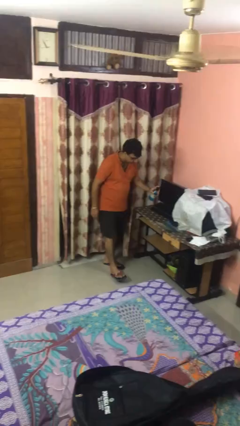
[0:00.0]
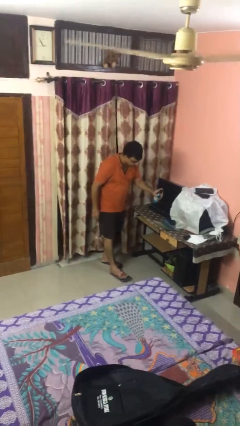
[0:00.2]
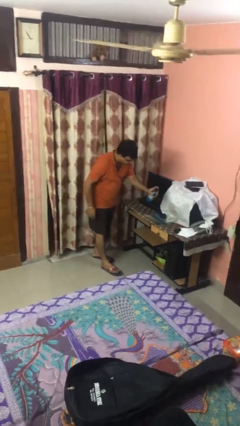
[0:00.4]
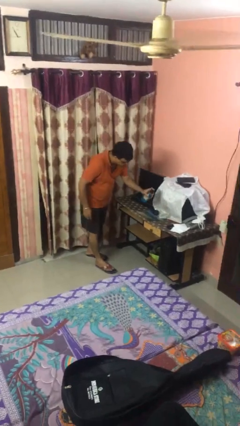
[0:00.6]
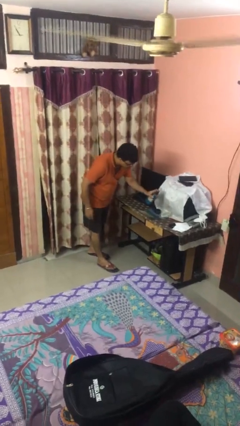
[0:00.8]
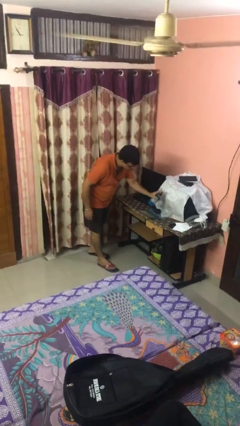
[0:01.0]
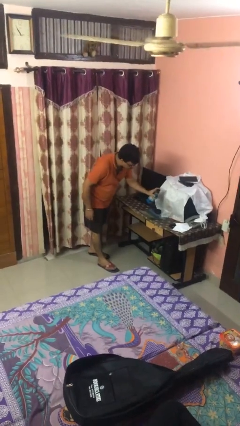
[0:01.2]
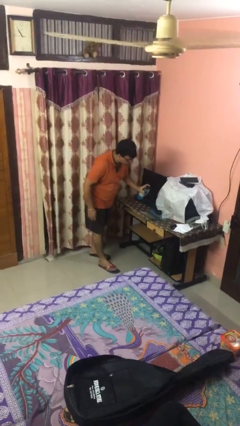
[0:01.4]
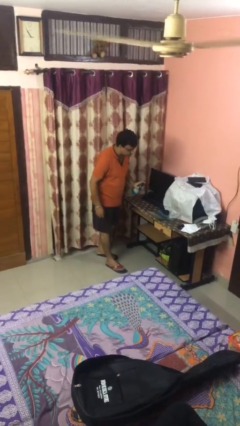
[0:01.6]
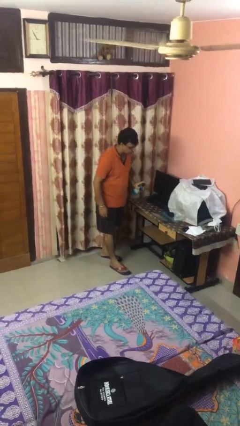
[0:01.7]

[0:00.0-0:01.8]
person sprays from bottle

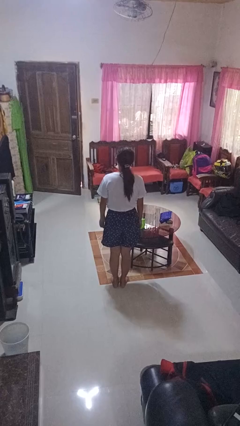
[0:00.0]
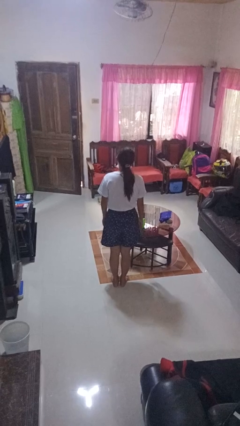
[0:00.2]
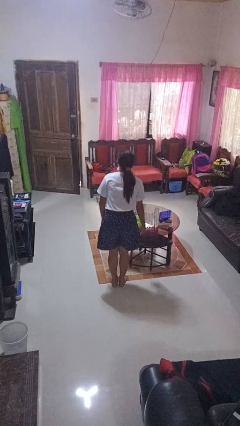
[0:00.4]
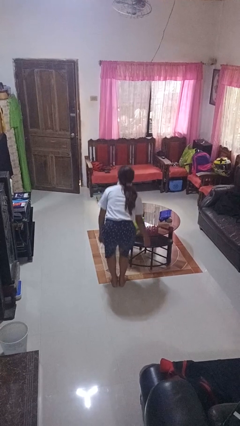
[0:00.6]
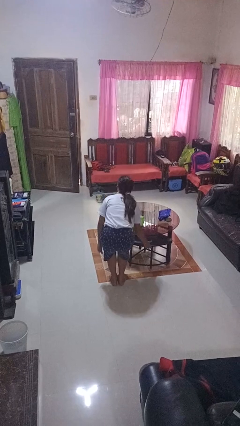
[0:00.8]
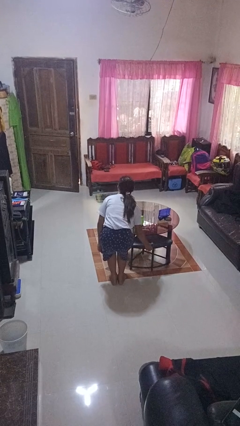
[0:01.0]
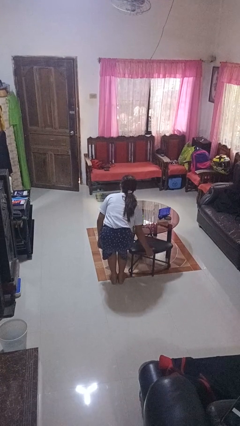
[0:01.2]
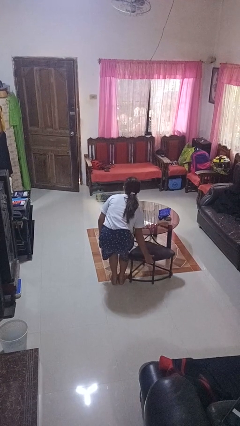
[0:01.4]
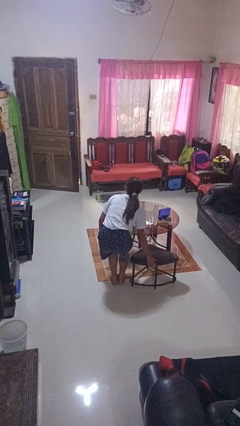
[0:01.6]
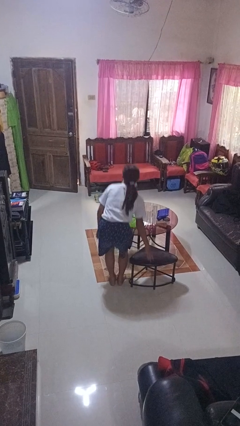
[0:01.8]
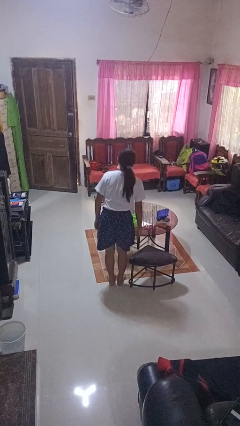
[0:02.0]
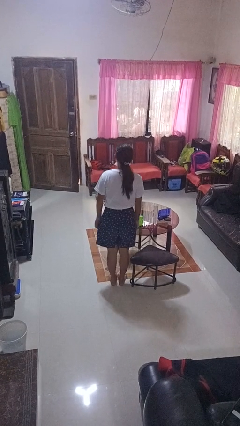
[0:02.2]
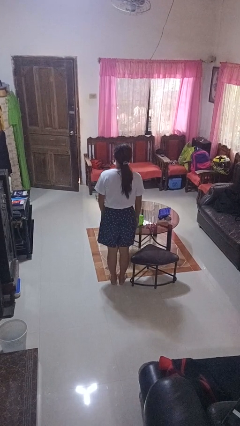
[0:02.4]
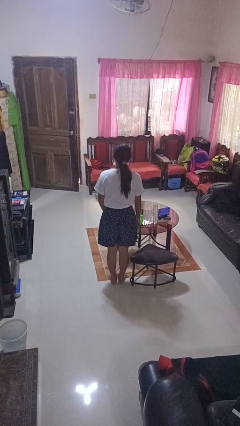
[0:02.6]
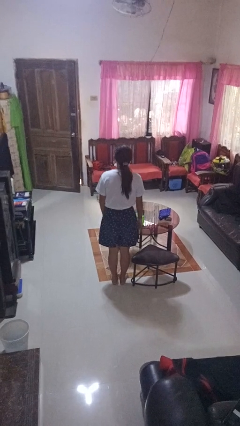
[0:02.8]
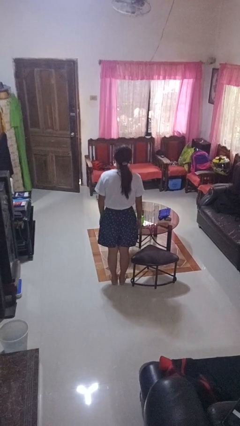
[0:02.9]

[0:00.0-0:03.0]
person pulls out chair

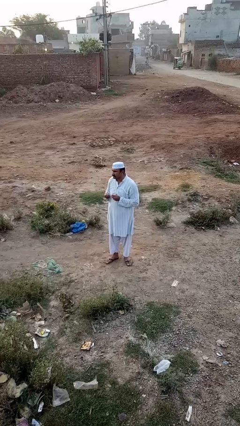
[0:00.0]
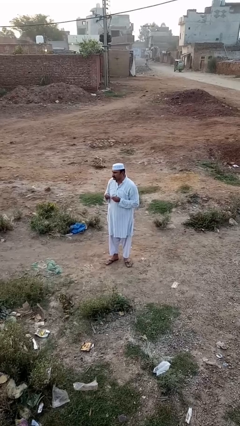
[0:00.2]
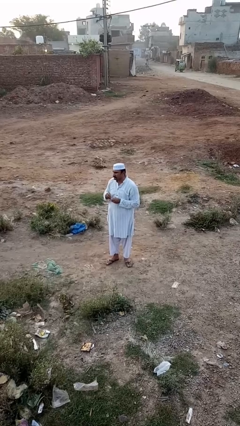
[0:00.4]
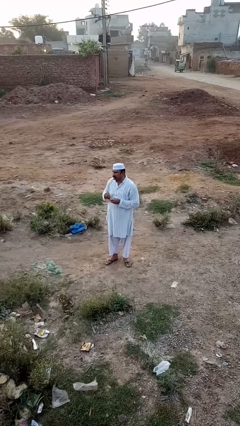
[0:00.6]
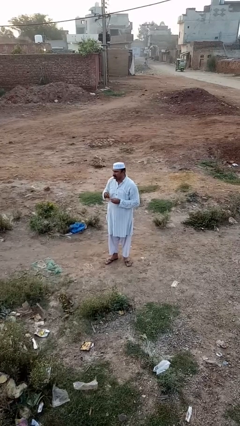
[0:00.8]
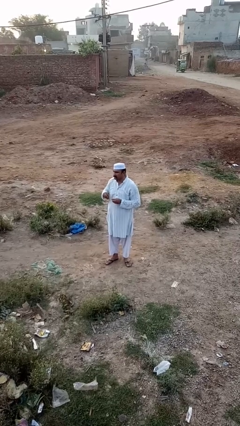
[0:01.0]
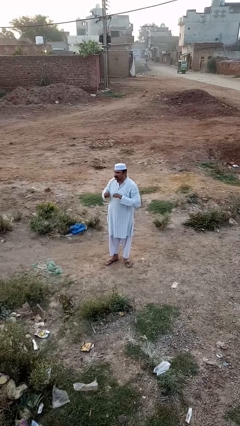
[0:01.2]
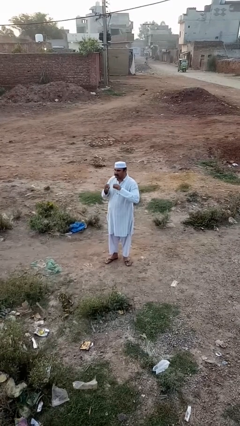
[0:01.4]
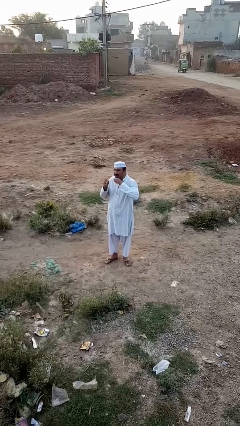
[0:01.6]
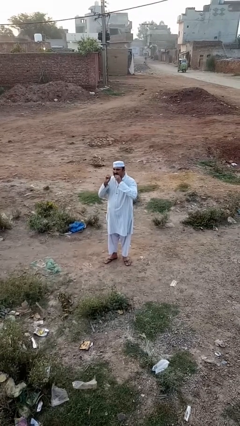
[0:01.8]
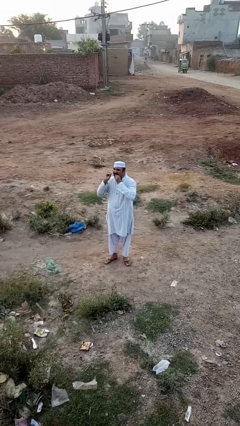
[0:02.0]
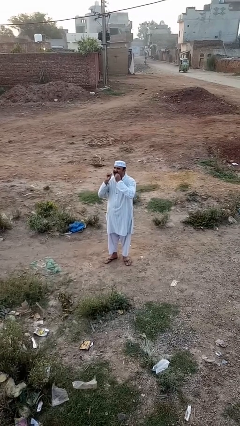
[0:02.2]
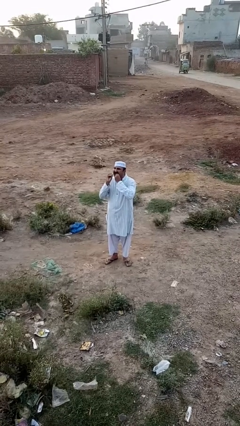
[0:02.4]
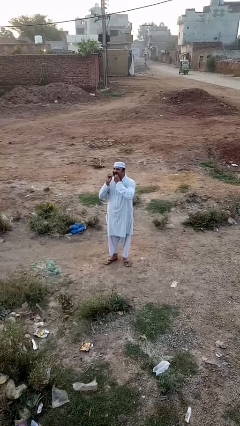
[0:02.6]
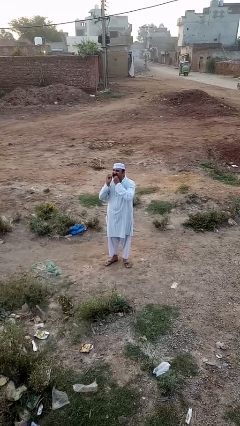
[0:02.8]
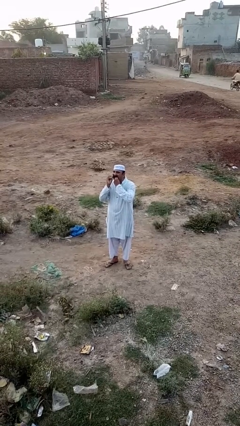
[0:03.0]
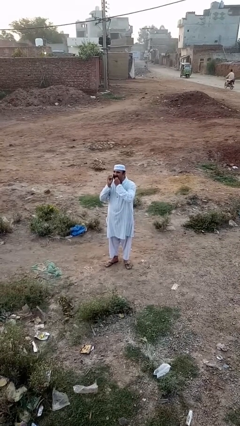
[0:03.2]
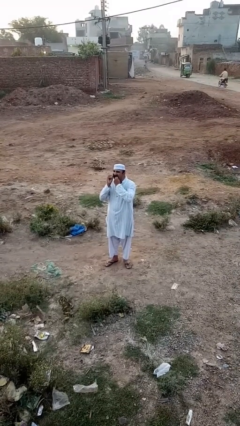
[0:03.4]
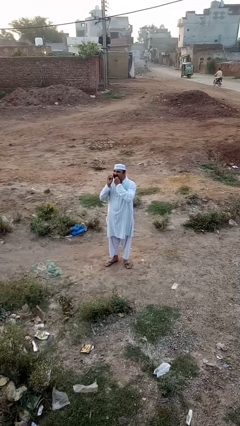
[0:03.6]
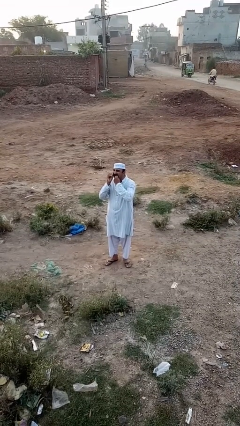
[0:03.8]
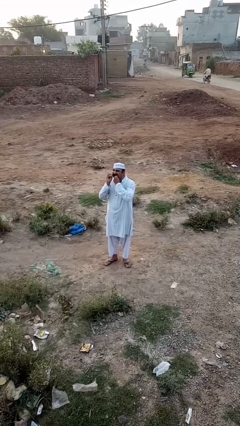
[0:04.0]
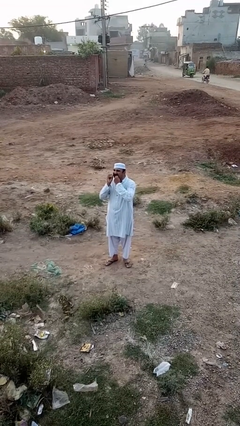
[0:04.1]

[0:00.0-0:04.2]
person flosses

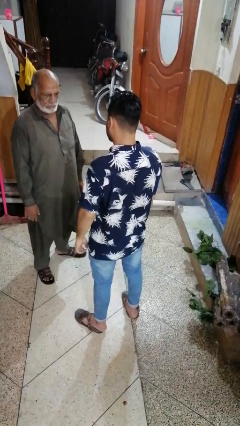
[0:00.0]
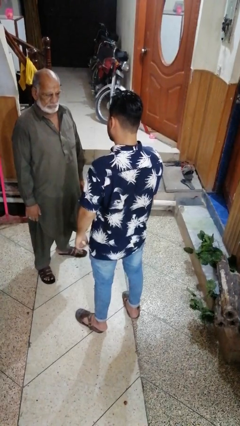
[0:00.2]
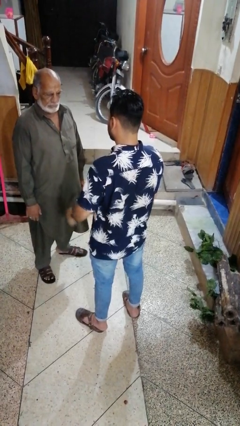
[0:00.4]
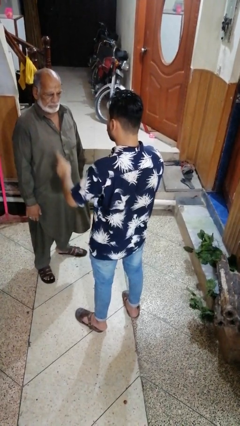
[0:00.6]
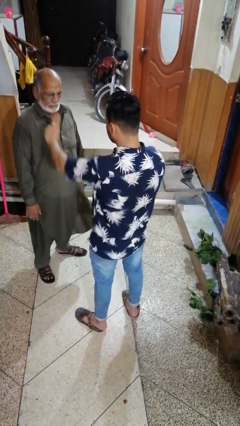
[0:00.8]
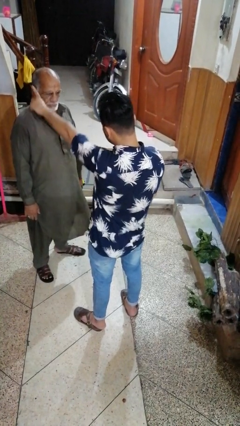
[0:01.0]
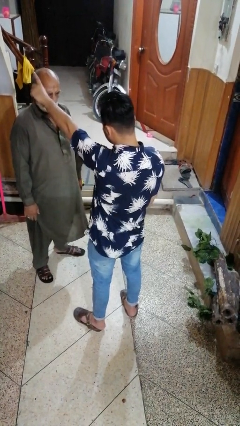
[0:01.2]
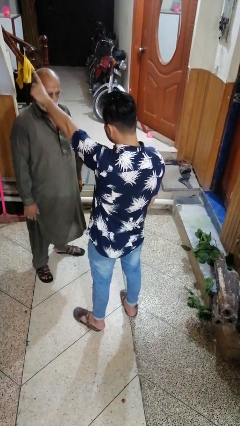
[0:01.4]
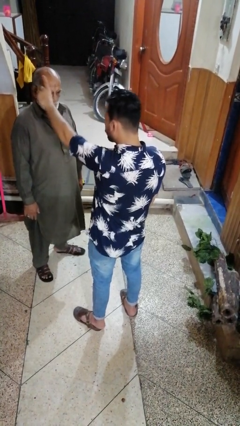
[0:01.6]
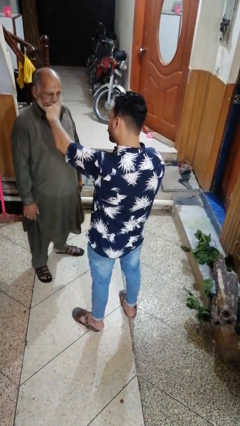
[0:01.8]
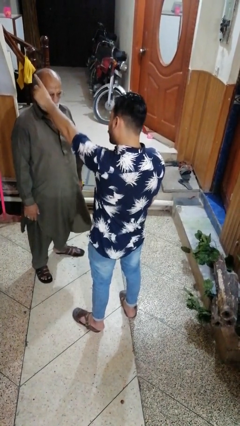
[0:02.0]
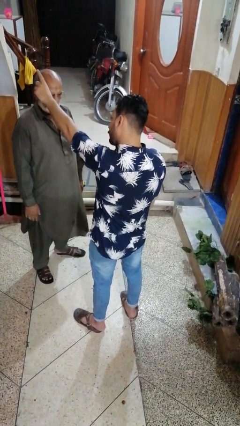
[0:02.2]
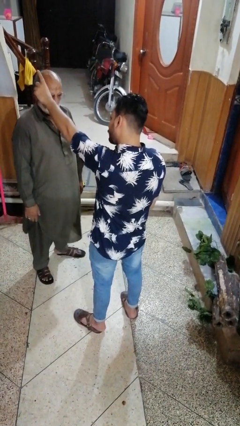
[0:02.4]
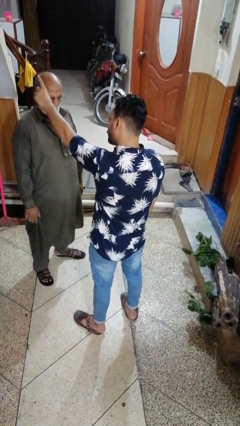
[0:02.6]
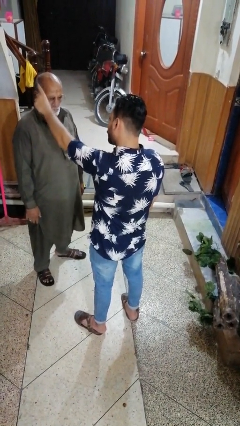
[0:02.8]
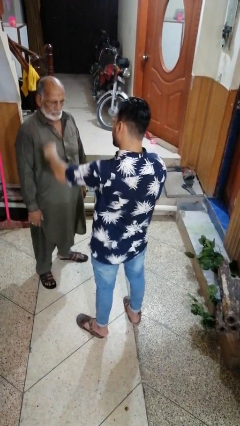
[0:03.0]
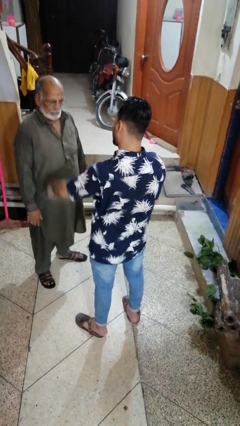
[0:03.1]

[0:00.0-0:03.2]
person shoves person

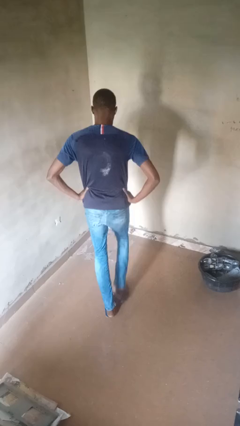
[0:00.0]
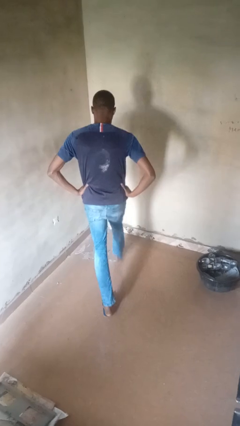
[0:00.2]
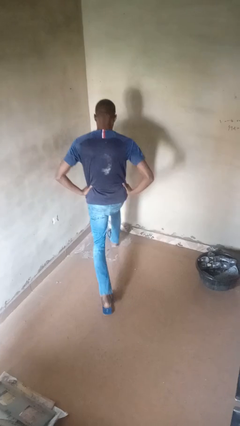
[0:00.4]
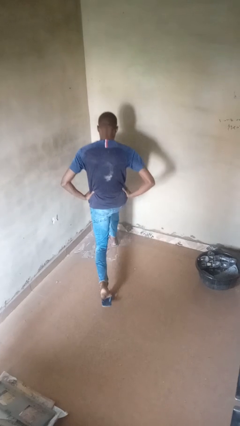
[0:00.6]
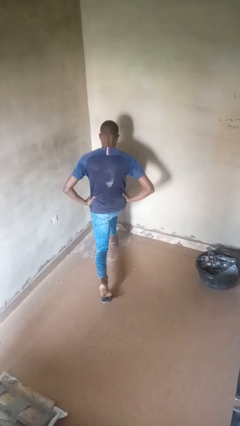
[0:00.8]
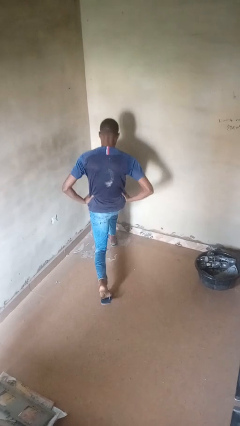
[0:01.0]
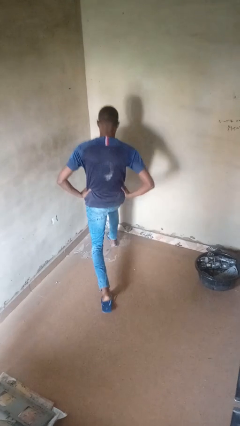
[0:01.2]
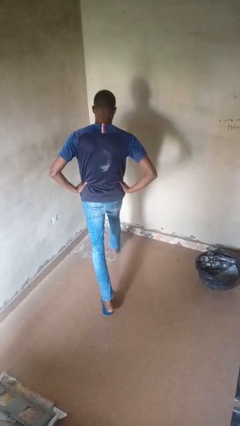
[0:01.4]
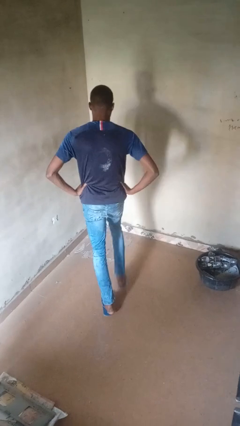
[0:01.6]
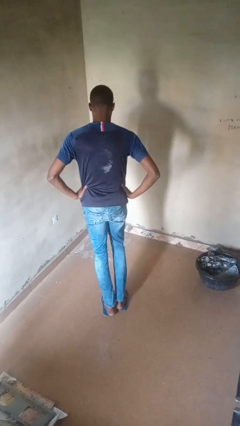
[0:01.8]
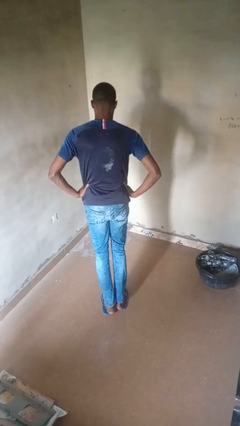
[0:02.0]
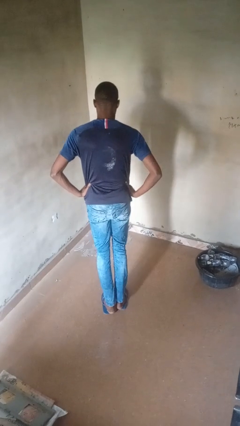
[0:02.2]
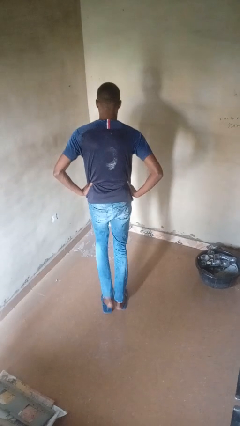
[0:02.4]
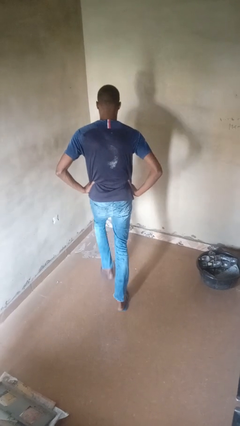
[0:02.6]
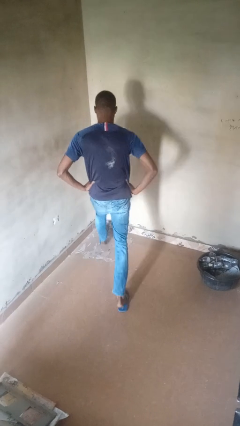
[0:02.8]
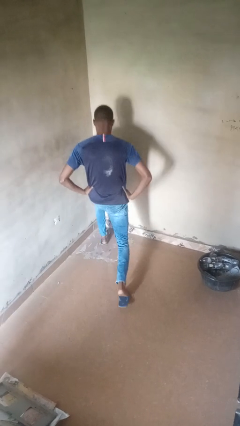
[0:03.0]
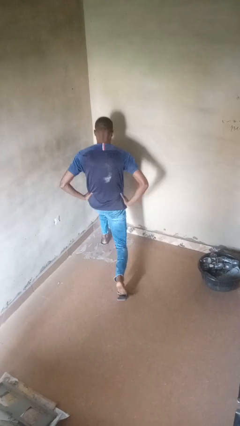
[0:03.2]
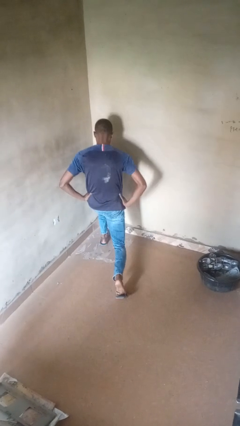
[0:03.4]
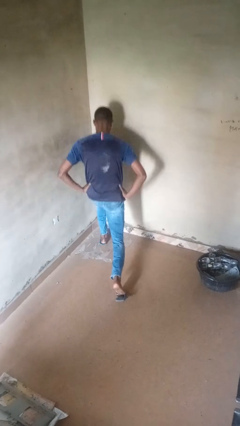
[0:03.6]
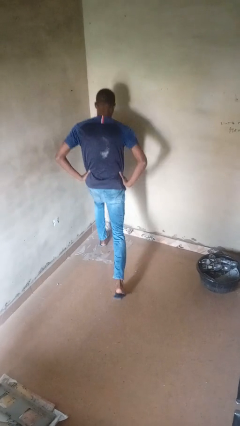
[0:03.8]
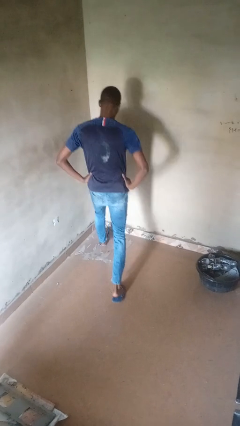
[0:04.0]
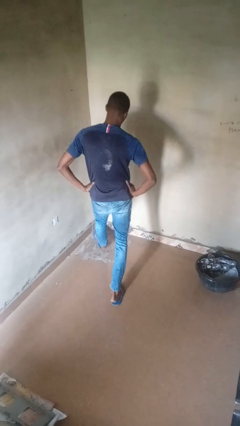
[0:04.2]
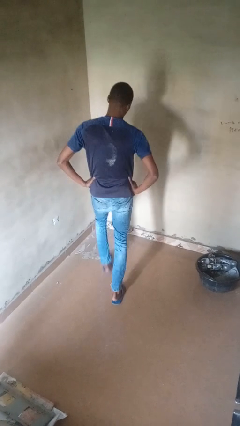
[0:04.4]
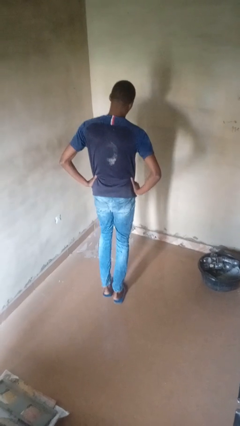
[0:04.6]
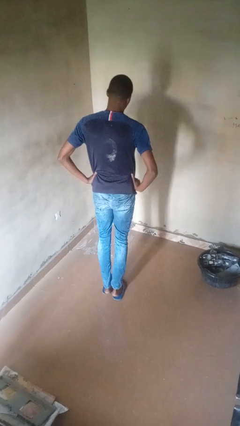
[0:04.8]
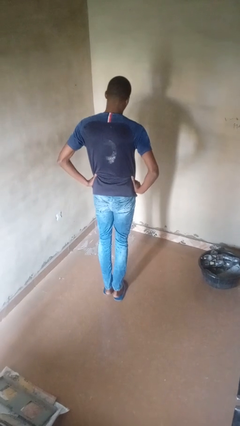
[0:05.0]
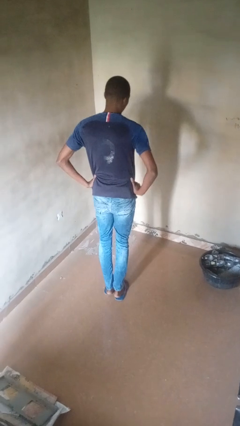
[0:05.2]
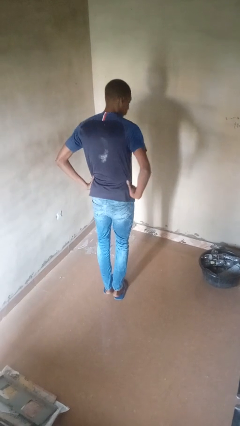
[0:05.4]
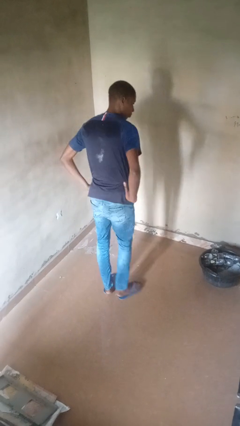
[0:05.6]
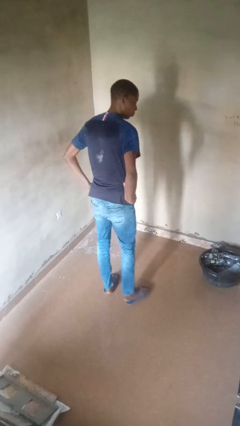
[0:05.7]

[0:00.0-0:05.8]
person exercises with lunges
